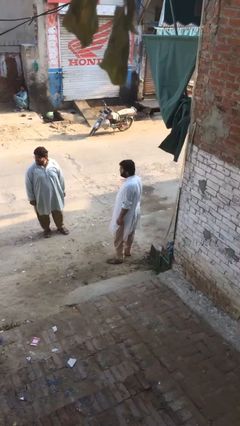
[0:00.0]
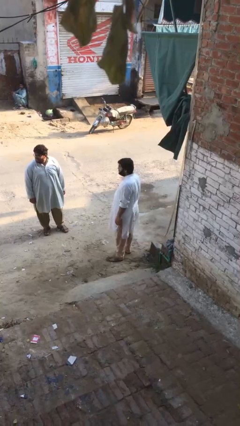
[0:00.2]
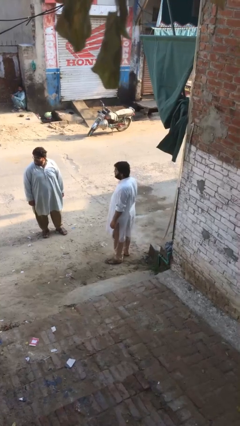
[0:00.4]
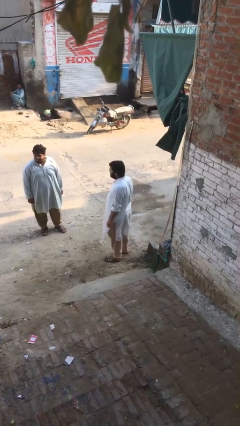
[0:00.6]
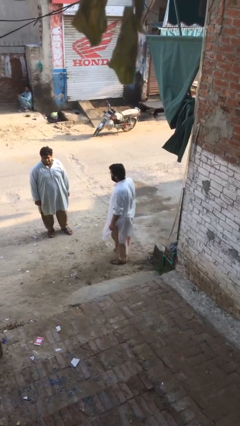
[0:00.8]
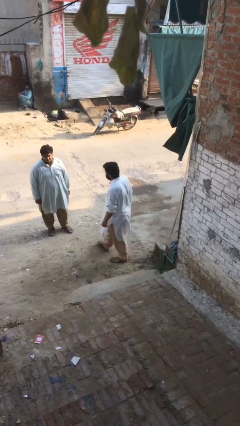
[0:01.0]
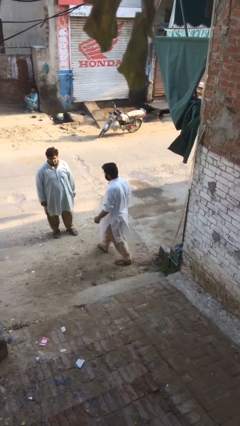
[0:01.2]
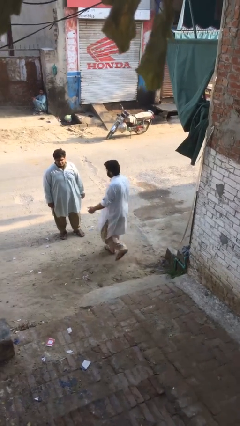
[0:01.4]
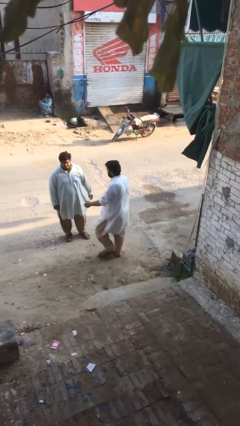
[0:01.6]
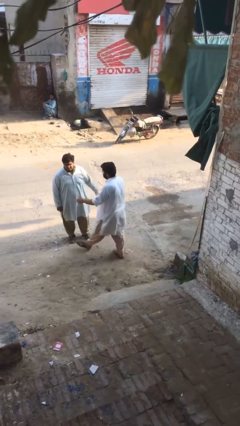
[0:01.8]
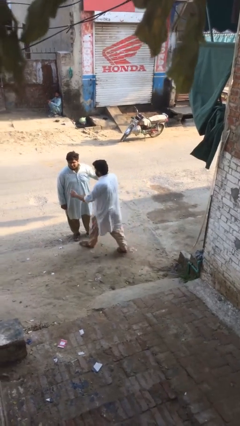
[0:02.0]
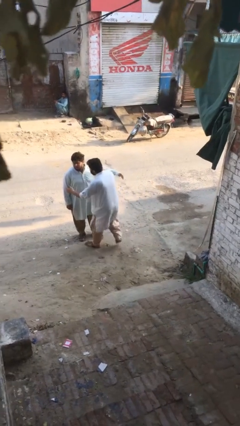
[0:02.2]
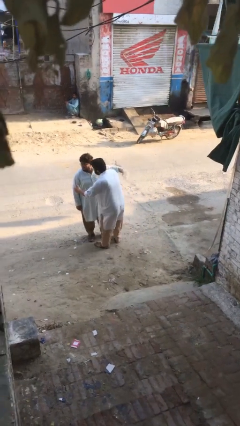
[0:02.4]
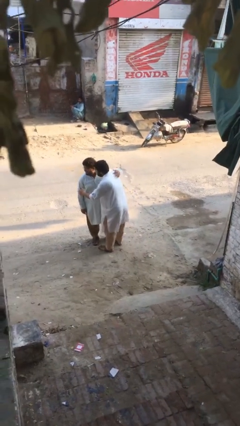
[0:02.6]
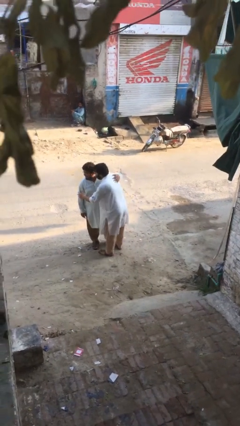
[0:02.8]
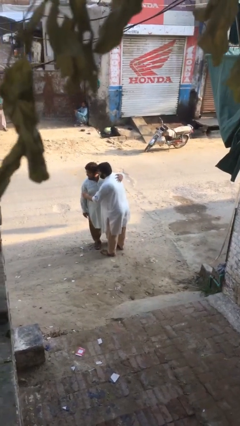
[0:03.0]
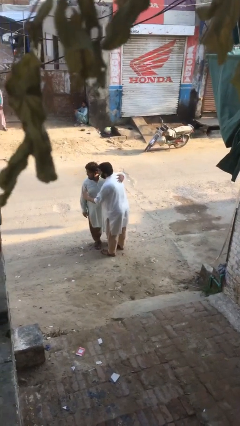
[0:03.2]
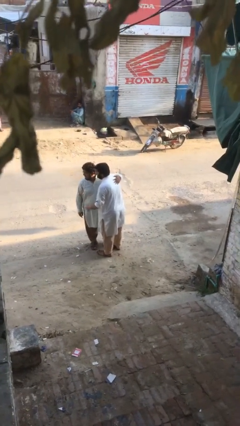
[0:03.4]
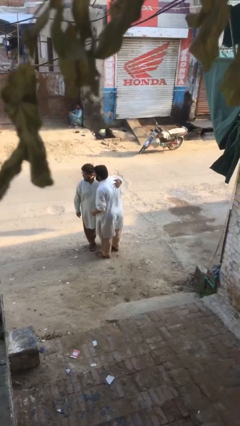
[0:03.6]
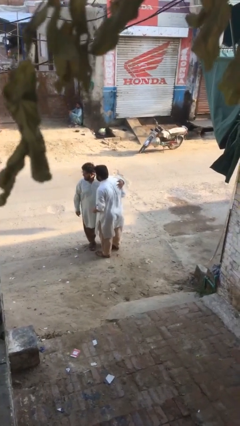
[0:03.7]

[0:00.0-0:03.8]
person embraces person

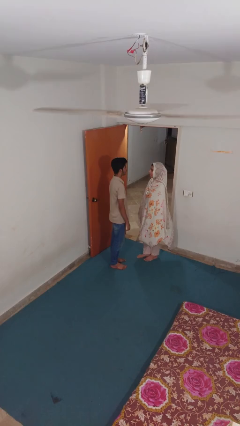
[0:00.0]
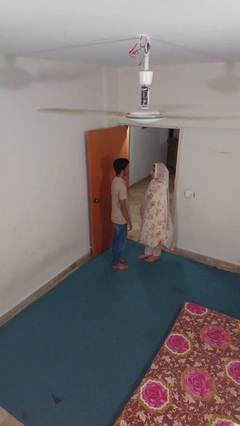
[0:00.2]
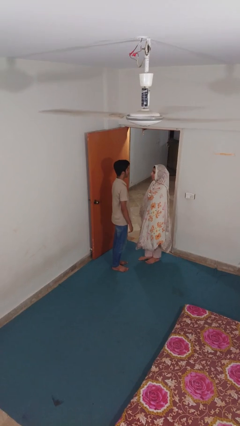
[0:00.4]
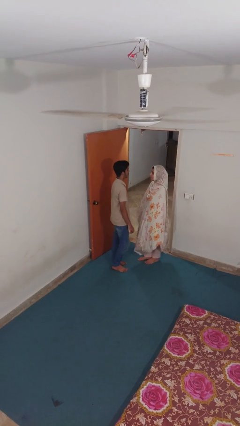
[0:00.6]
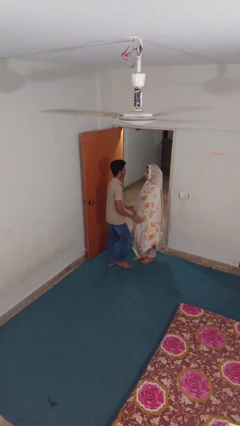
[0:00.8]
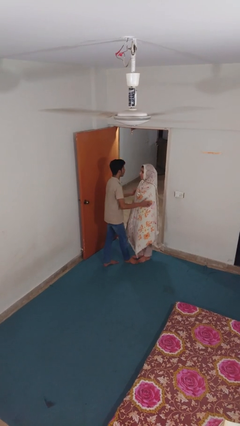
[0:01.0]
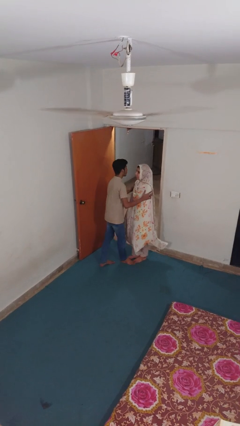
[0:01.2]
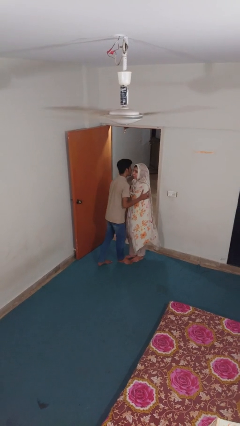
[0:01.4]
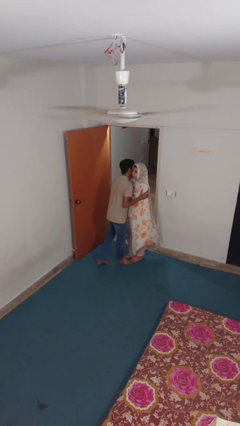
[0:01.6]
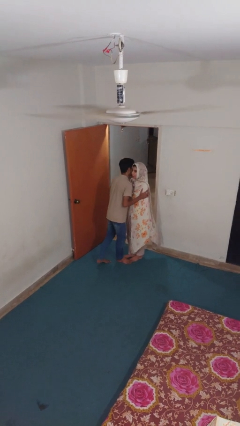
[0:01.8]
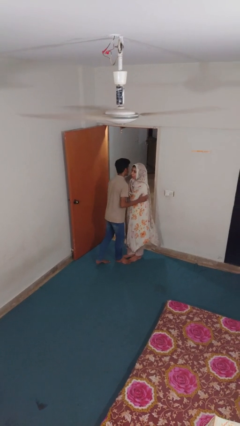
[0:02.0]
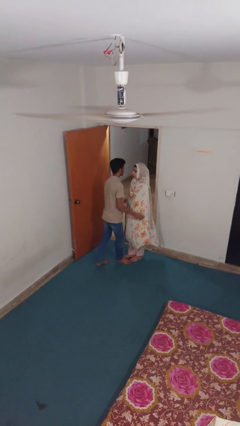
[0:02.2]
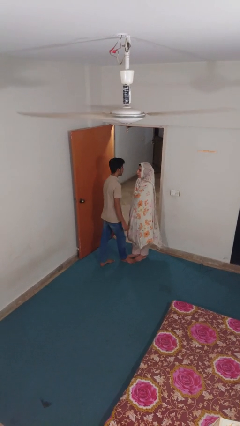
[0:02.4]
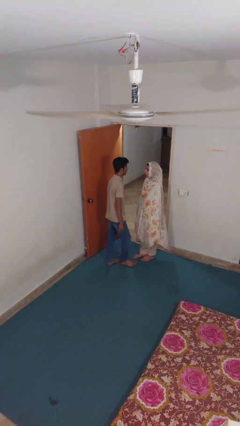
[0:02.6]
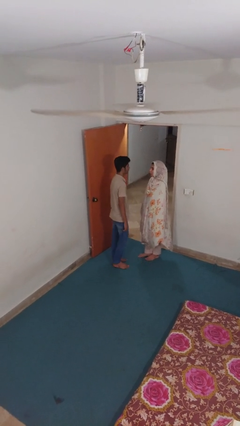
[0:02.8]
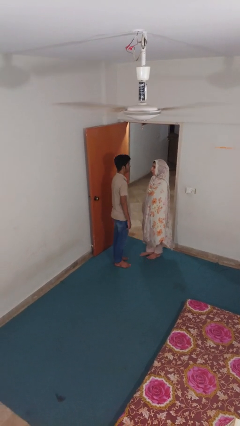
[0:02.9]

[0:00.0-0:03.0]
person kisses cheek of person

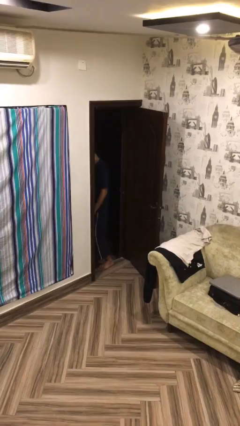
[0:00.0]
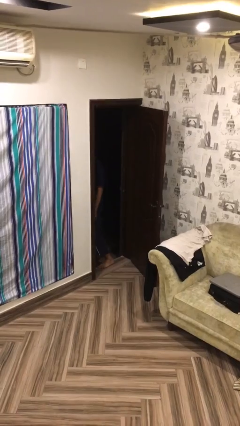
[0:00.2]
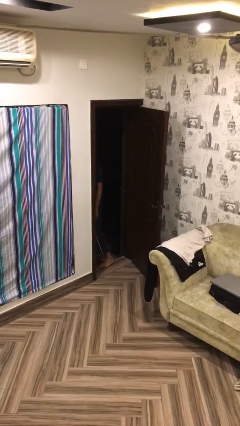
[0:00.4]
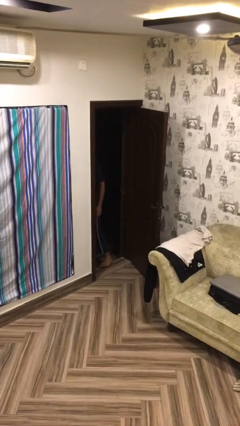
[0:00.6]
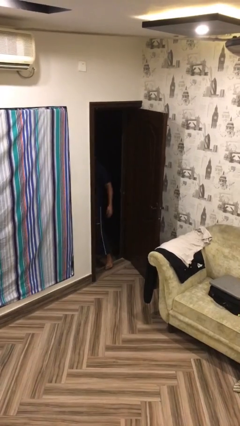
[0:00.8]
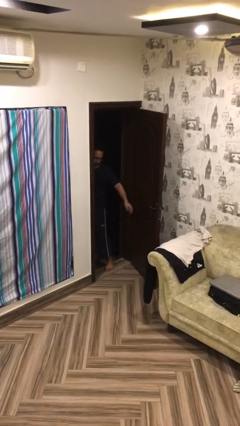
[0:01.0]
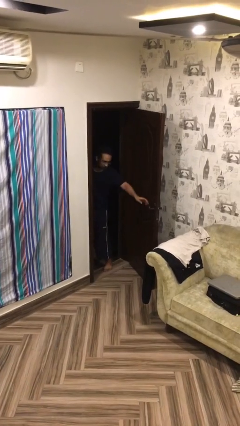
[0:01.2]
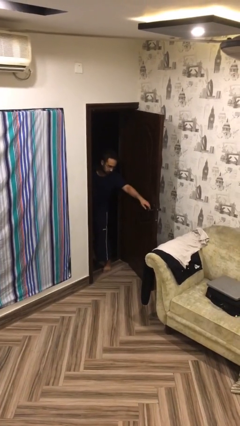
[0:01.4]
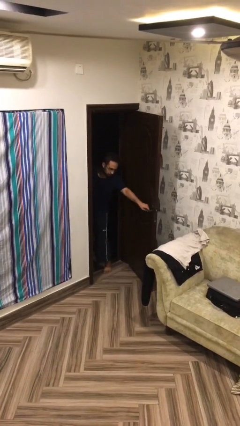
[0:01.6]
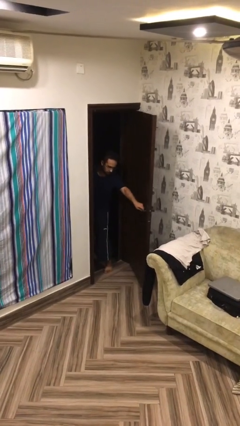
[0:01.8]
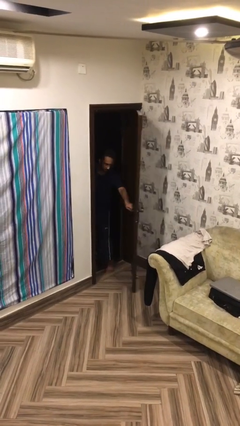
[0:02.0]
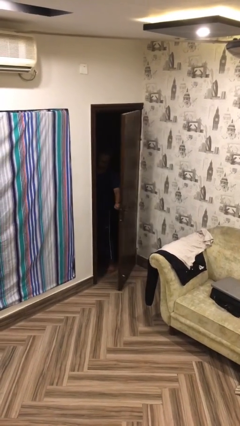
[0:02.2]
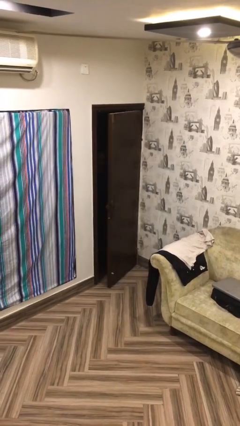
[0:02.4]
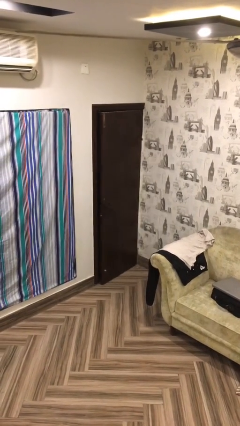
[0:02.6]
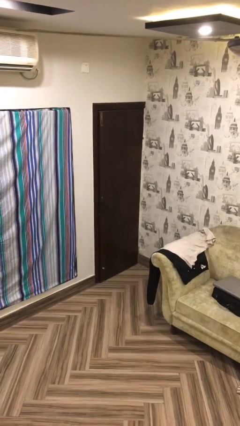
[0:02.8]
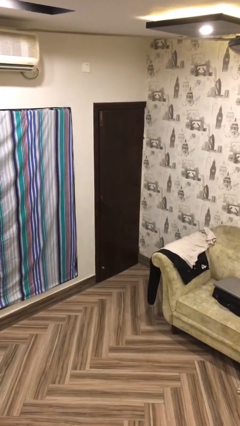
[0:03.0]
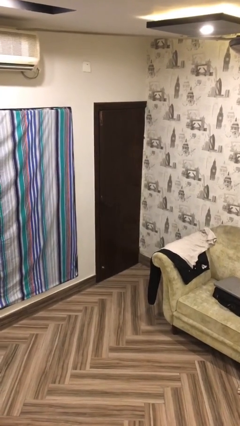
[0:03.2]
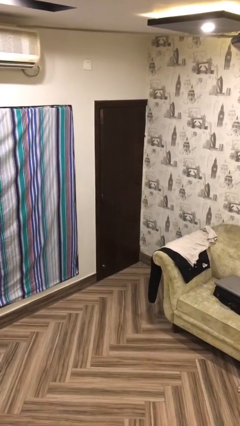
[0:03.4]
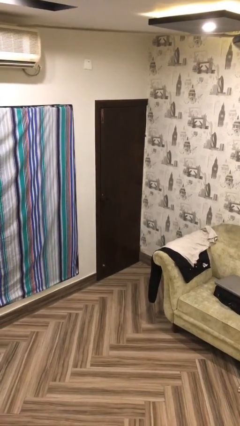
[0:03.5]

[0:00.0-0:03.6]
person closes facility door

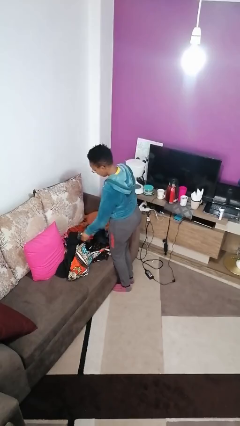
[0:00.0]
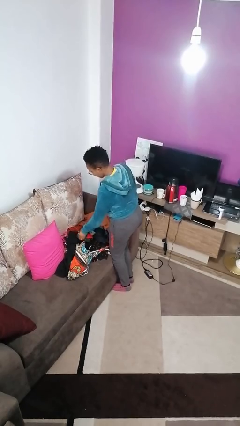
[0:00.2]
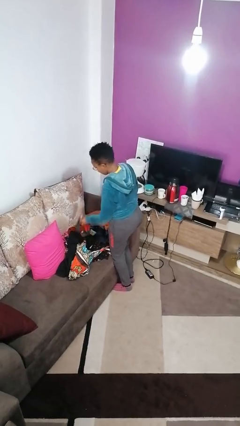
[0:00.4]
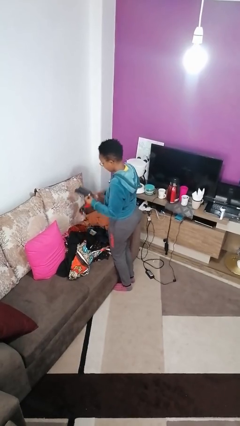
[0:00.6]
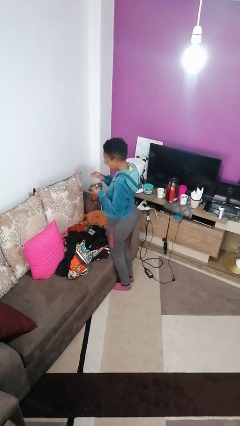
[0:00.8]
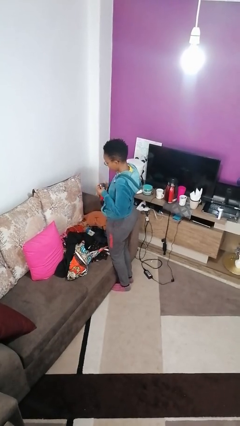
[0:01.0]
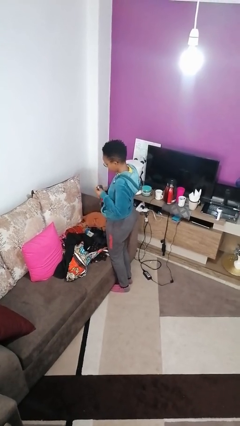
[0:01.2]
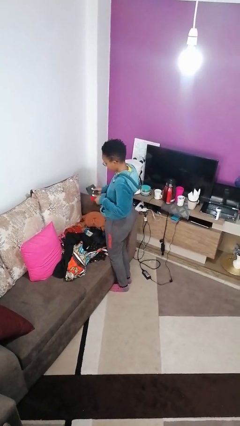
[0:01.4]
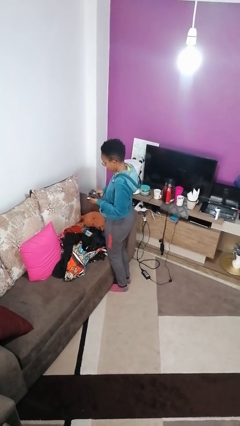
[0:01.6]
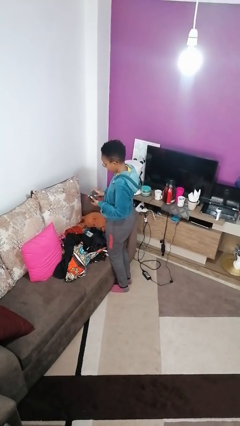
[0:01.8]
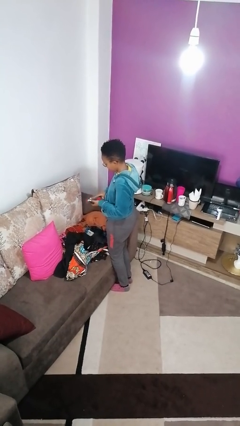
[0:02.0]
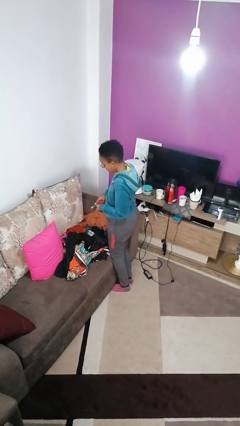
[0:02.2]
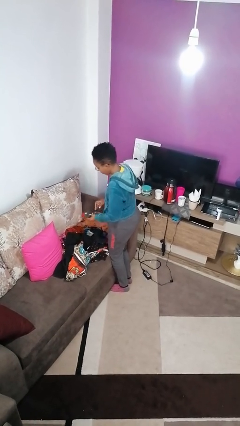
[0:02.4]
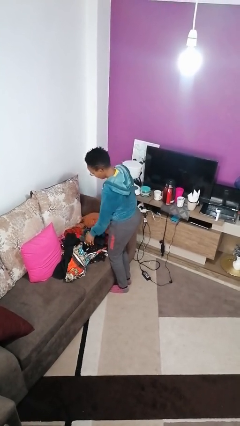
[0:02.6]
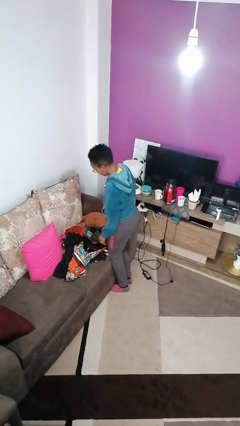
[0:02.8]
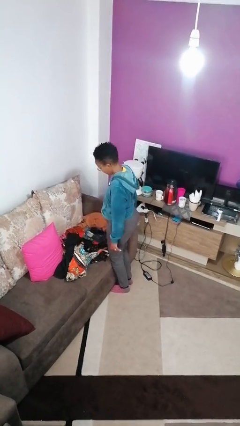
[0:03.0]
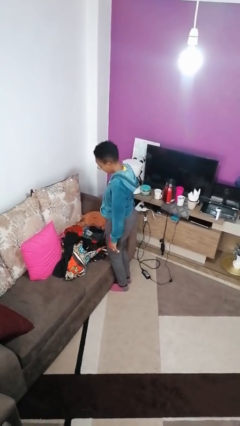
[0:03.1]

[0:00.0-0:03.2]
person folds socks

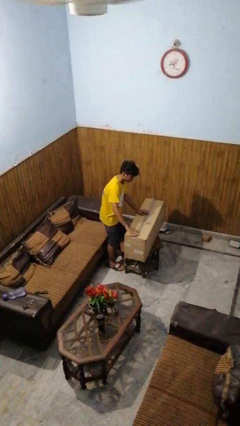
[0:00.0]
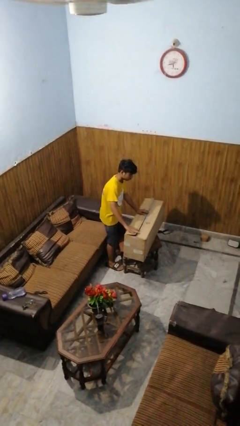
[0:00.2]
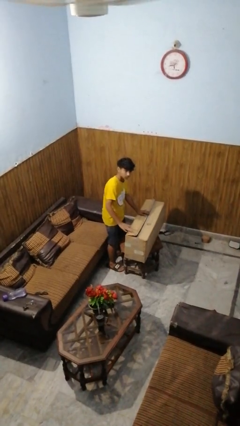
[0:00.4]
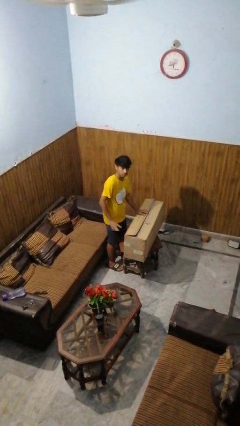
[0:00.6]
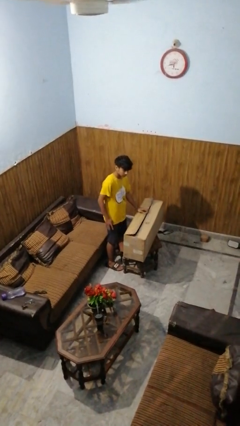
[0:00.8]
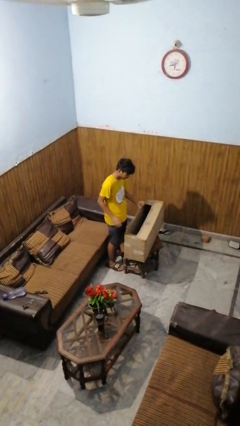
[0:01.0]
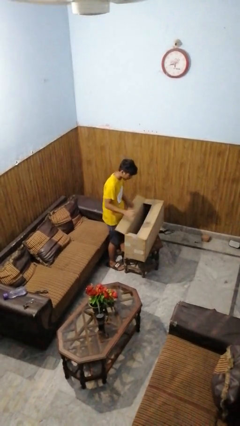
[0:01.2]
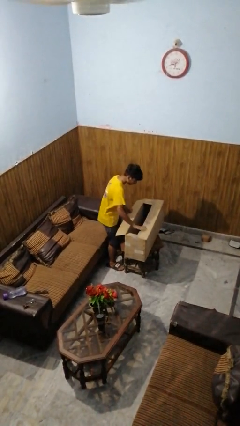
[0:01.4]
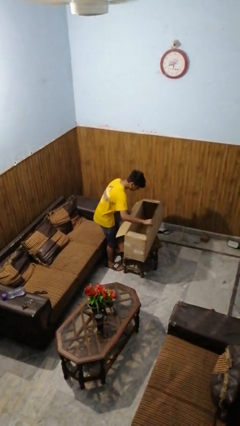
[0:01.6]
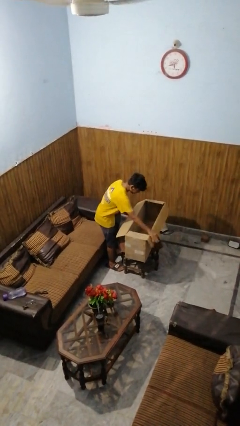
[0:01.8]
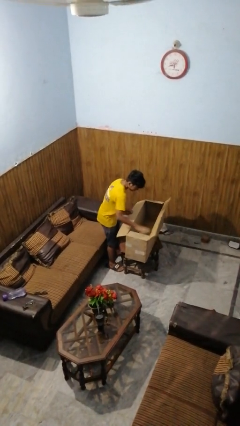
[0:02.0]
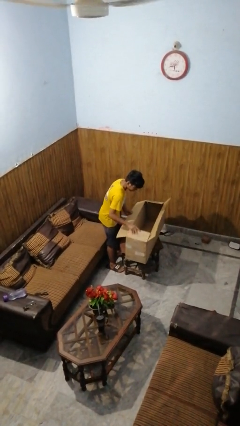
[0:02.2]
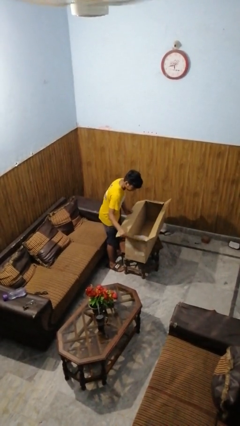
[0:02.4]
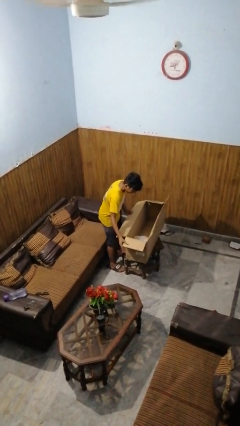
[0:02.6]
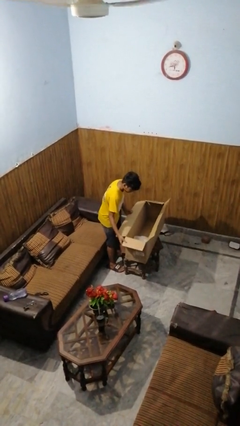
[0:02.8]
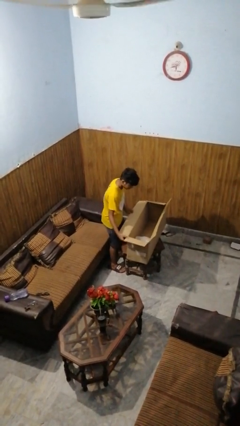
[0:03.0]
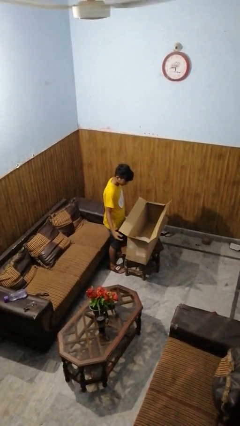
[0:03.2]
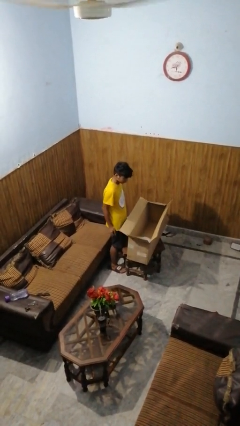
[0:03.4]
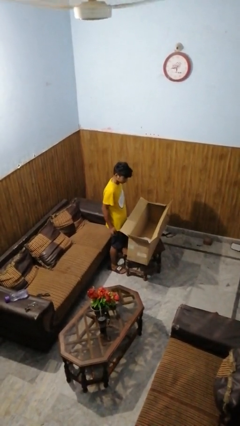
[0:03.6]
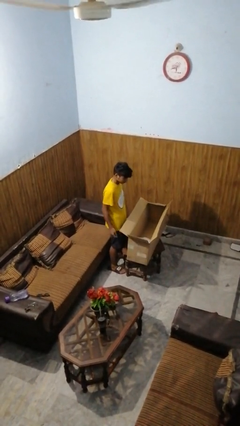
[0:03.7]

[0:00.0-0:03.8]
person opens box
